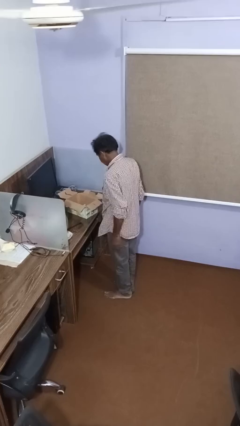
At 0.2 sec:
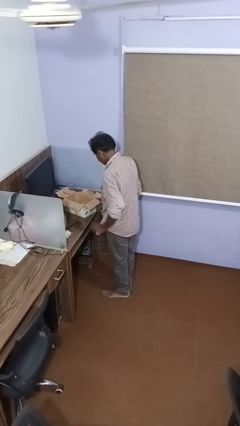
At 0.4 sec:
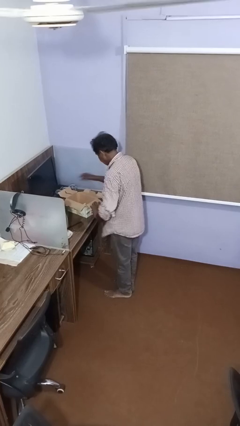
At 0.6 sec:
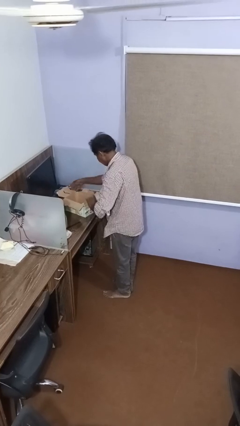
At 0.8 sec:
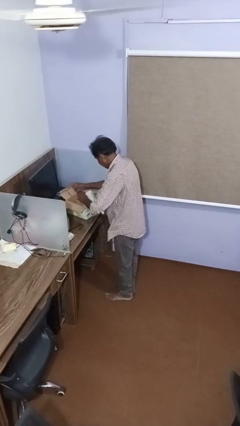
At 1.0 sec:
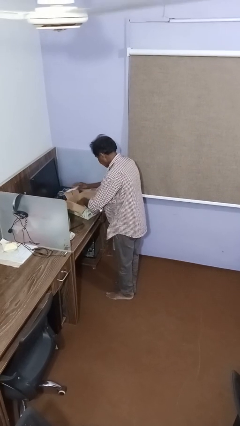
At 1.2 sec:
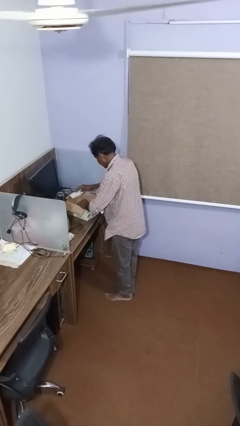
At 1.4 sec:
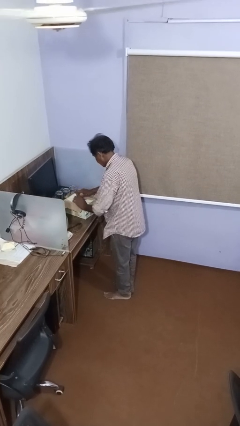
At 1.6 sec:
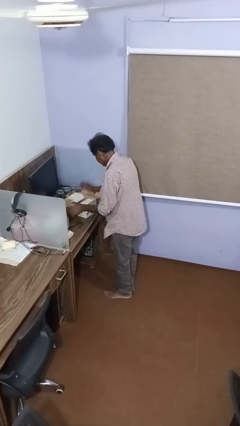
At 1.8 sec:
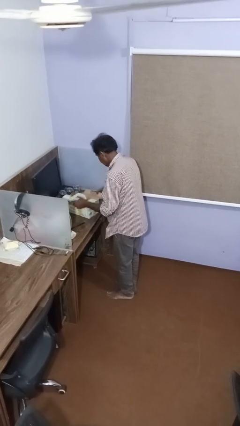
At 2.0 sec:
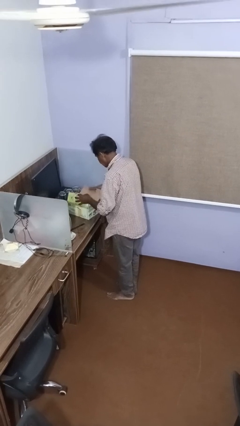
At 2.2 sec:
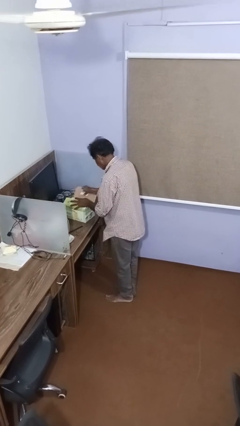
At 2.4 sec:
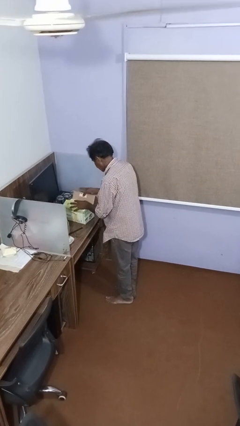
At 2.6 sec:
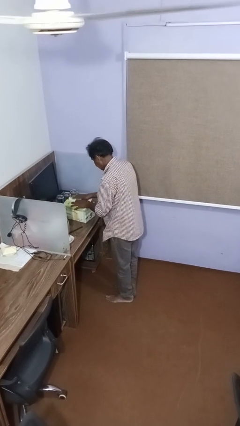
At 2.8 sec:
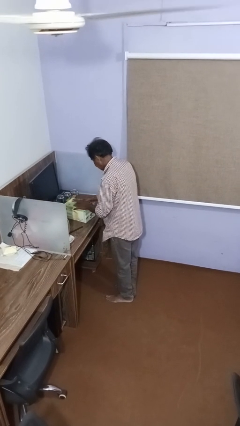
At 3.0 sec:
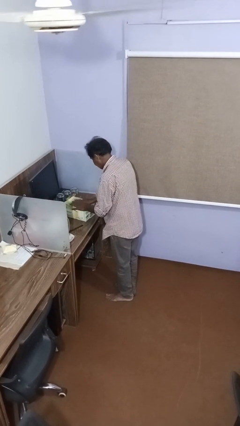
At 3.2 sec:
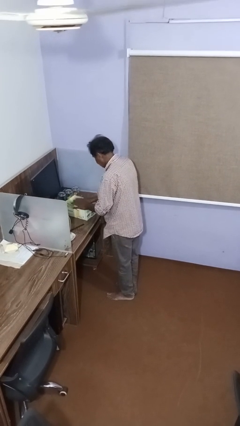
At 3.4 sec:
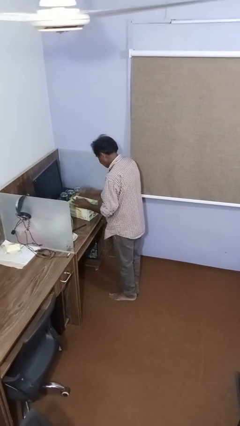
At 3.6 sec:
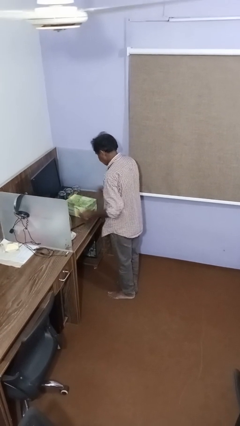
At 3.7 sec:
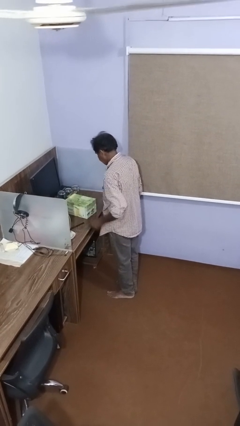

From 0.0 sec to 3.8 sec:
person closes box

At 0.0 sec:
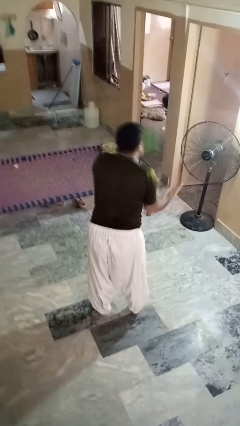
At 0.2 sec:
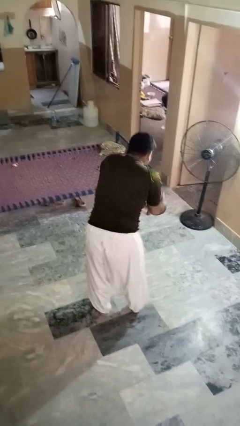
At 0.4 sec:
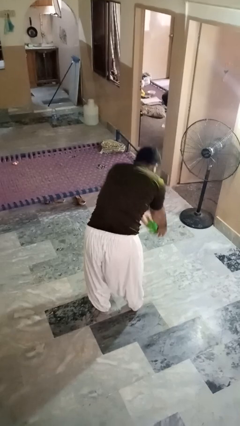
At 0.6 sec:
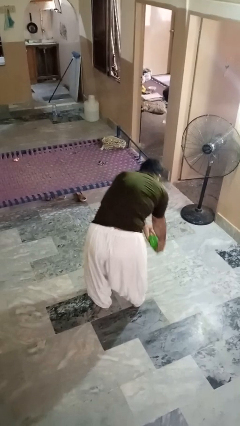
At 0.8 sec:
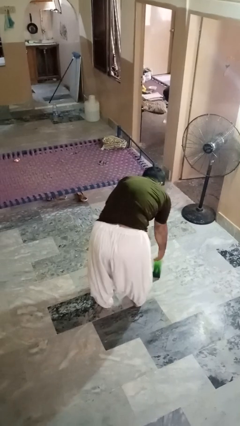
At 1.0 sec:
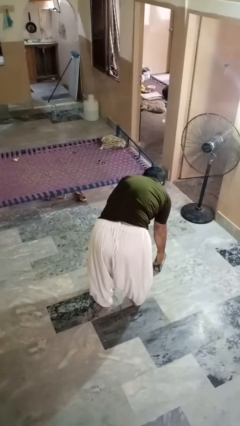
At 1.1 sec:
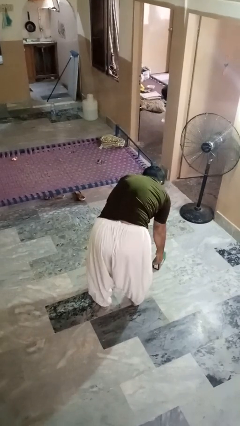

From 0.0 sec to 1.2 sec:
person catches dropped object

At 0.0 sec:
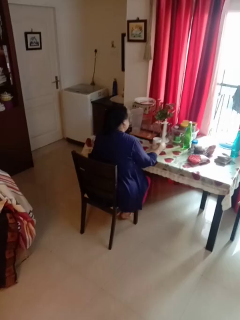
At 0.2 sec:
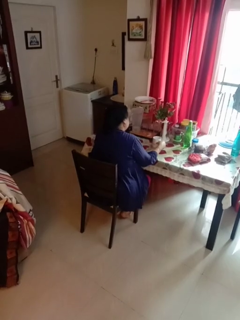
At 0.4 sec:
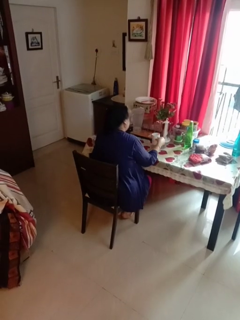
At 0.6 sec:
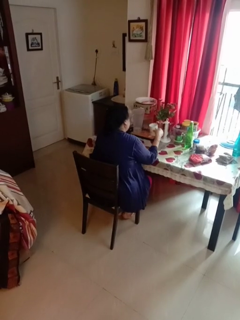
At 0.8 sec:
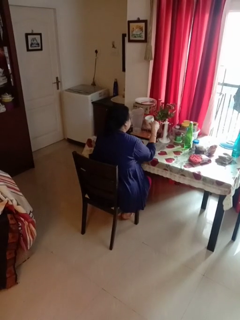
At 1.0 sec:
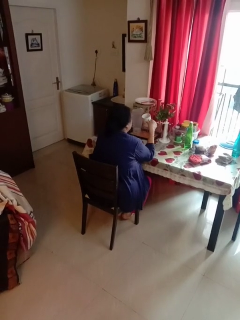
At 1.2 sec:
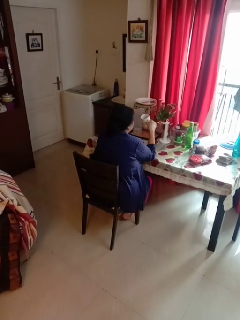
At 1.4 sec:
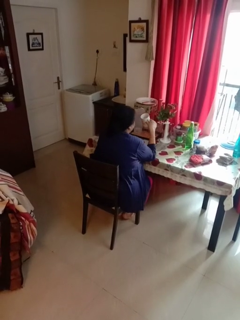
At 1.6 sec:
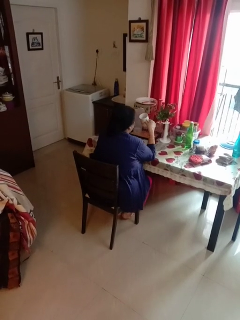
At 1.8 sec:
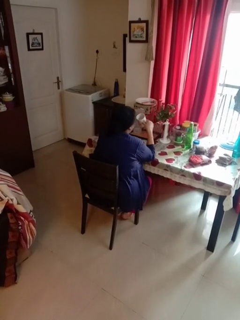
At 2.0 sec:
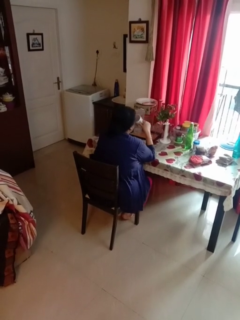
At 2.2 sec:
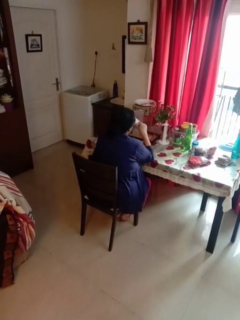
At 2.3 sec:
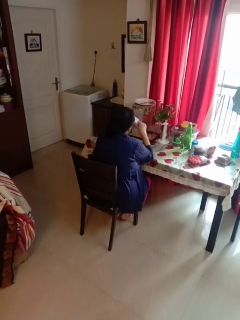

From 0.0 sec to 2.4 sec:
person picks up object from table

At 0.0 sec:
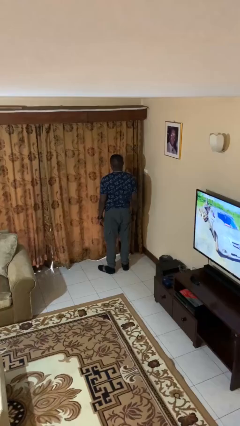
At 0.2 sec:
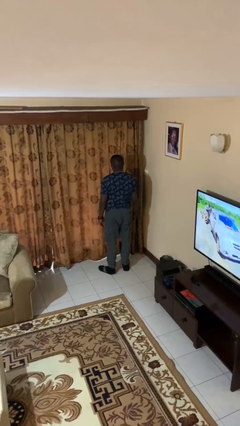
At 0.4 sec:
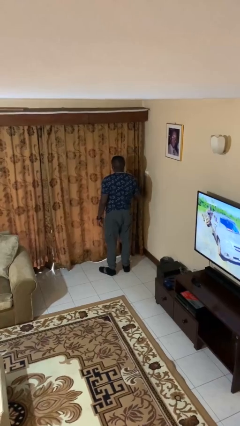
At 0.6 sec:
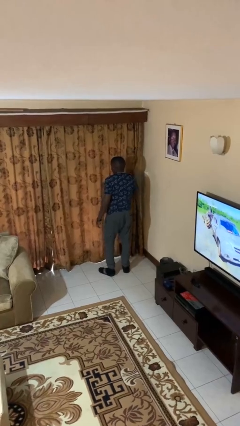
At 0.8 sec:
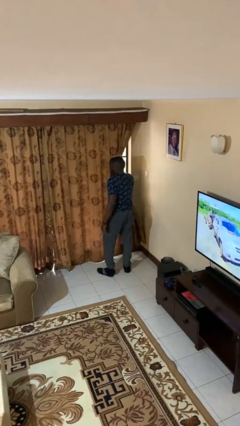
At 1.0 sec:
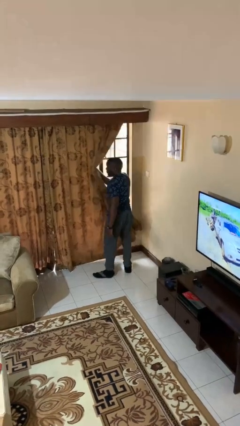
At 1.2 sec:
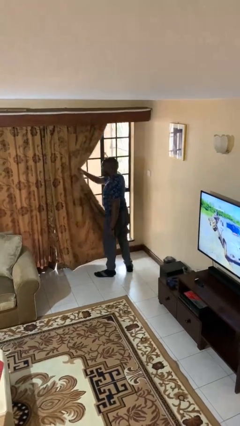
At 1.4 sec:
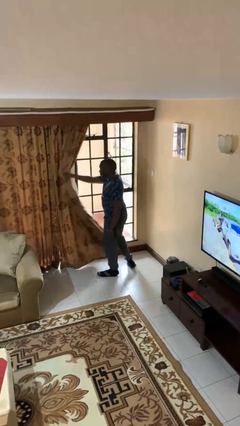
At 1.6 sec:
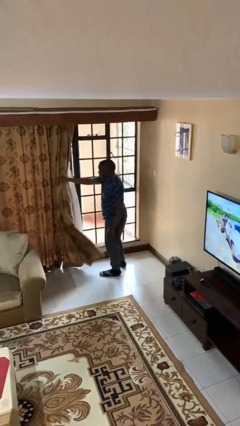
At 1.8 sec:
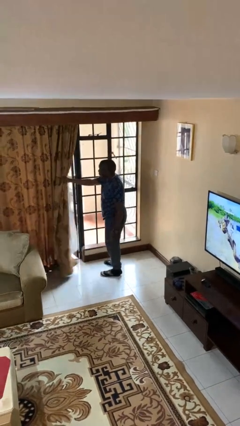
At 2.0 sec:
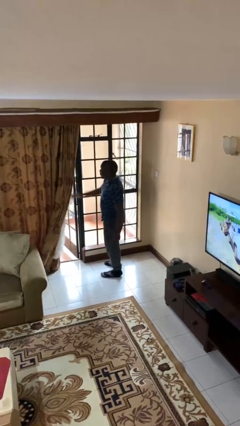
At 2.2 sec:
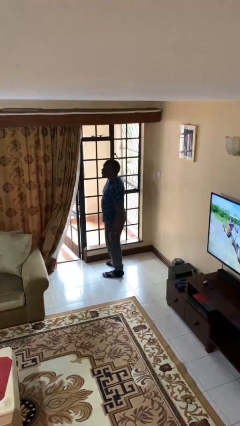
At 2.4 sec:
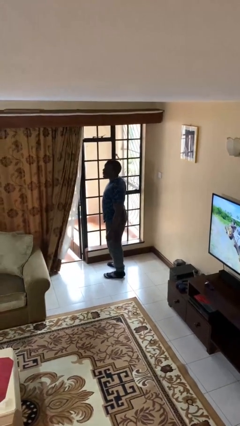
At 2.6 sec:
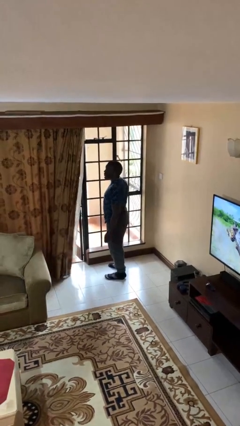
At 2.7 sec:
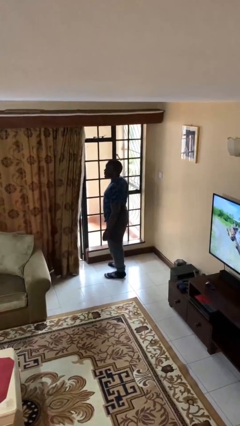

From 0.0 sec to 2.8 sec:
person opens curtains

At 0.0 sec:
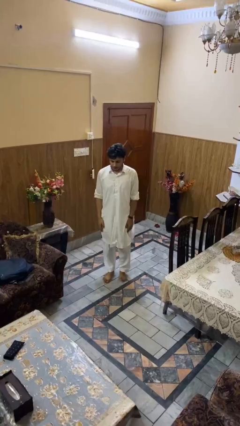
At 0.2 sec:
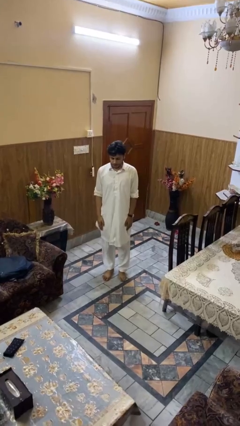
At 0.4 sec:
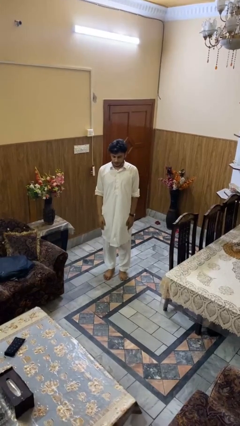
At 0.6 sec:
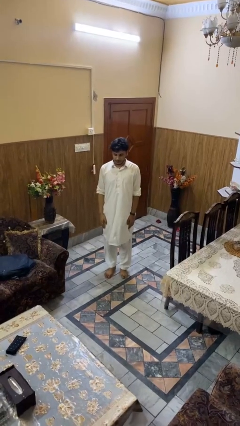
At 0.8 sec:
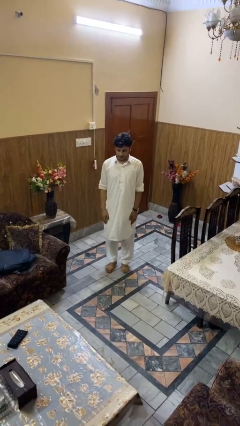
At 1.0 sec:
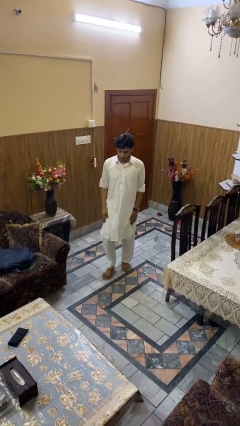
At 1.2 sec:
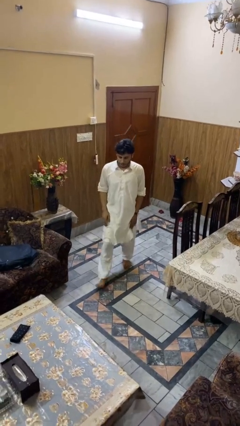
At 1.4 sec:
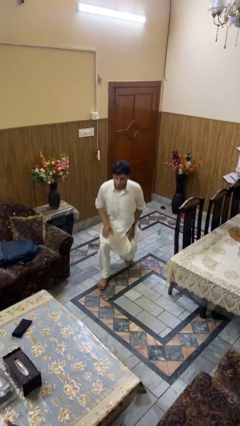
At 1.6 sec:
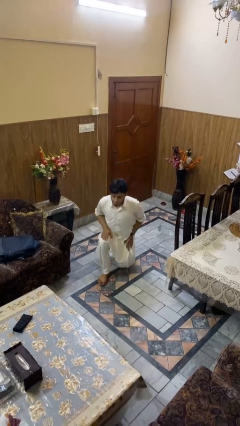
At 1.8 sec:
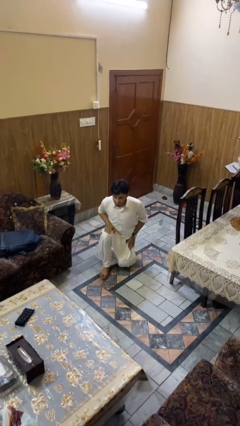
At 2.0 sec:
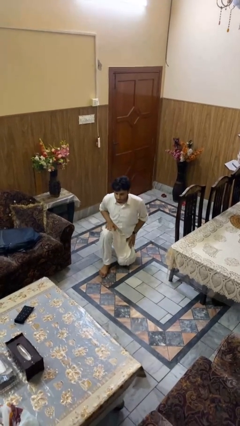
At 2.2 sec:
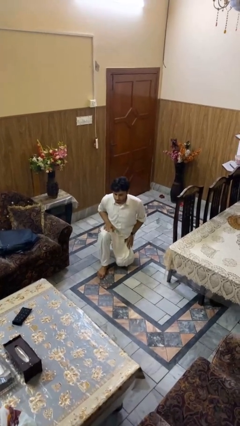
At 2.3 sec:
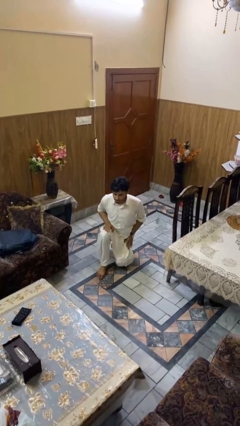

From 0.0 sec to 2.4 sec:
person kneels

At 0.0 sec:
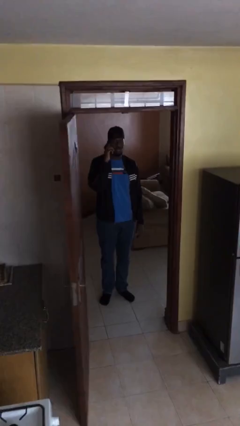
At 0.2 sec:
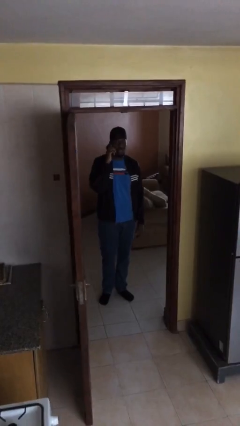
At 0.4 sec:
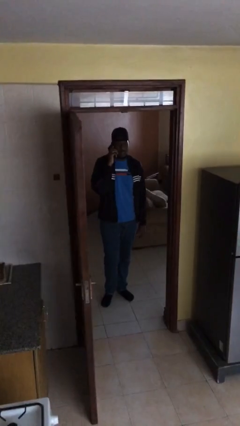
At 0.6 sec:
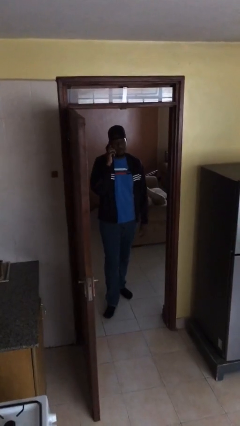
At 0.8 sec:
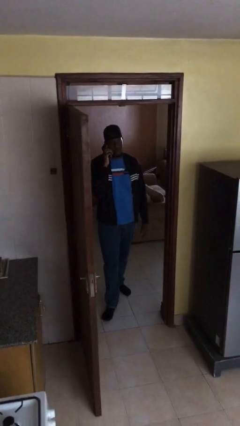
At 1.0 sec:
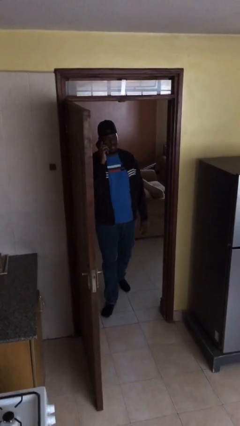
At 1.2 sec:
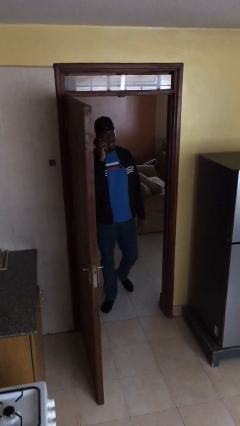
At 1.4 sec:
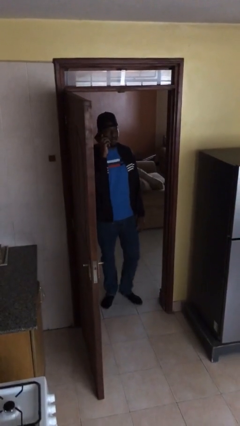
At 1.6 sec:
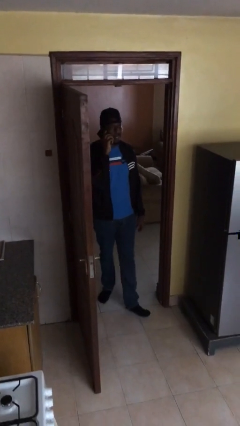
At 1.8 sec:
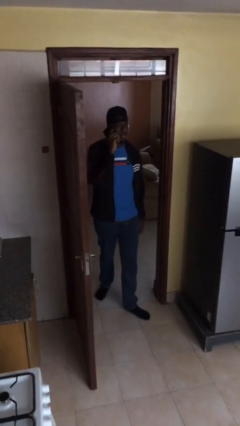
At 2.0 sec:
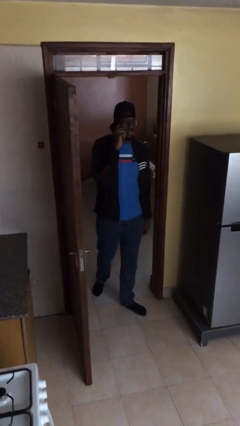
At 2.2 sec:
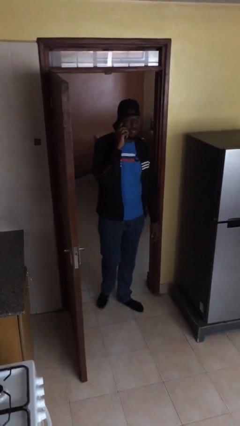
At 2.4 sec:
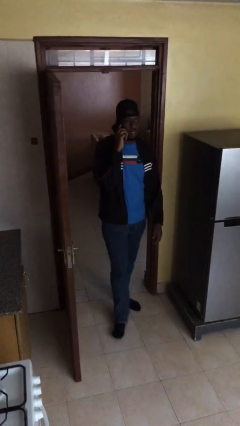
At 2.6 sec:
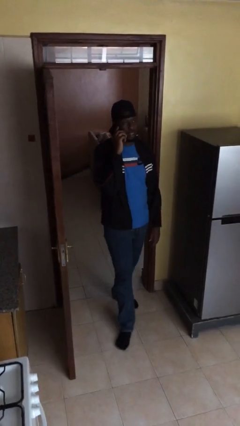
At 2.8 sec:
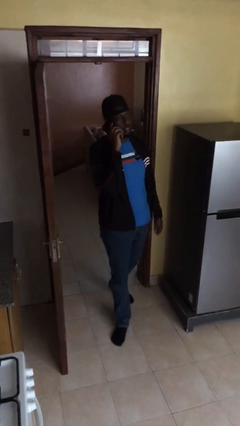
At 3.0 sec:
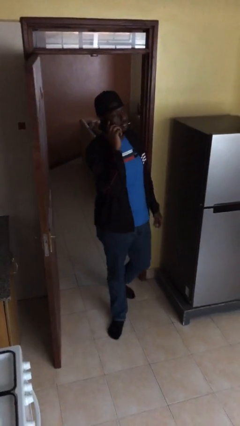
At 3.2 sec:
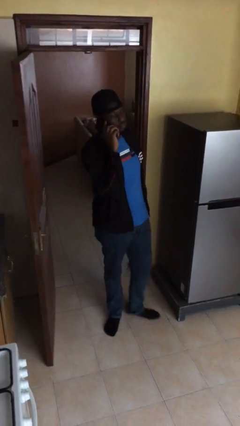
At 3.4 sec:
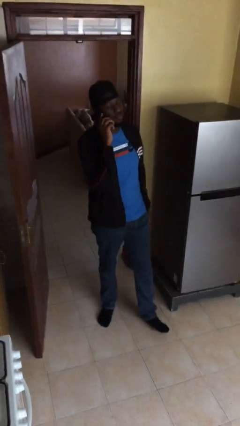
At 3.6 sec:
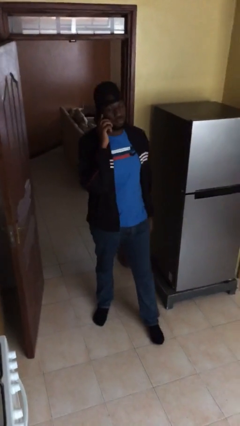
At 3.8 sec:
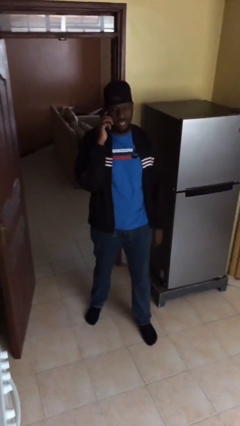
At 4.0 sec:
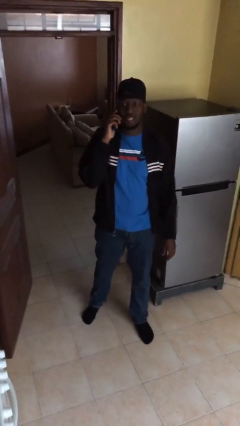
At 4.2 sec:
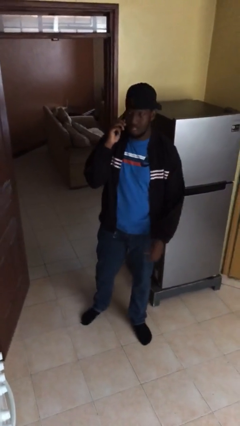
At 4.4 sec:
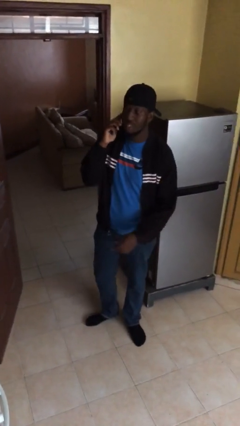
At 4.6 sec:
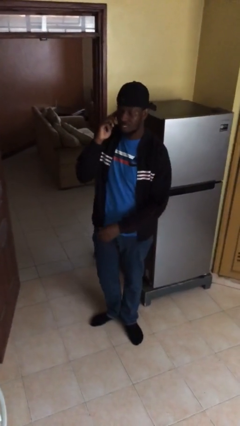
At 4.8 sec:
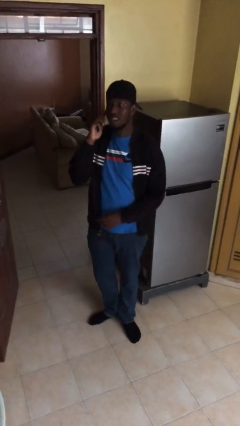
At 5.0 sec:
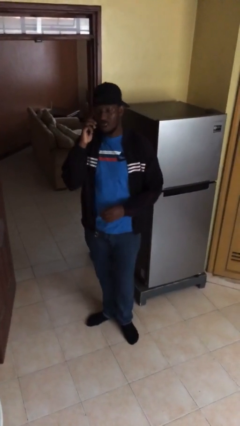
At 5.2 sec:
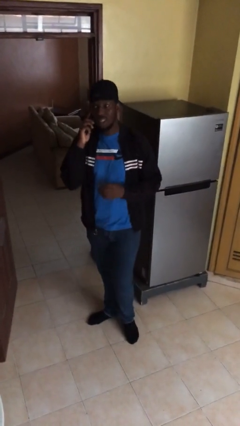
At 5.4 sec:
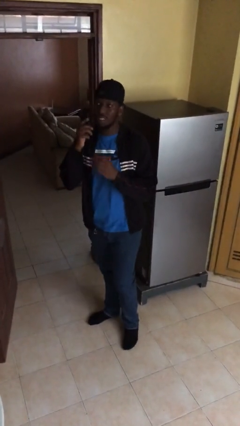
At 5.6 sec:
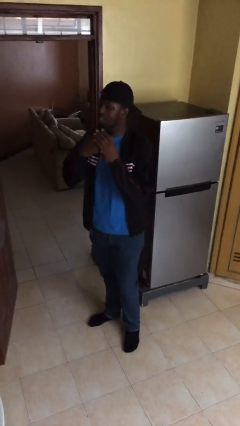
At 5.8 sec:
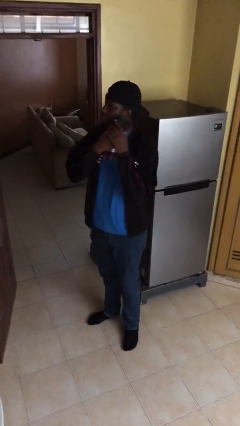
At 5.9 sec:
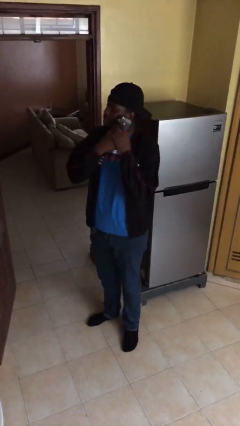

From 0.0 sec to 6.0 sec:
person enters scene through structure
